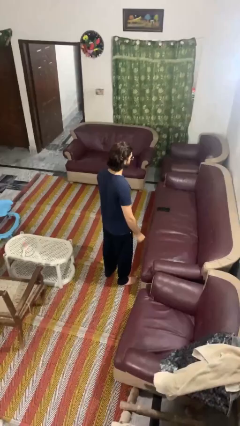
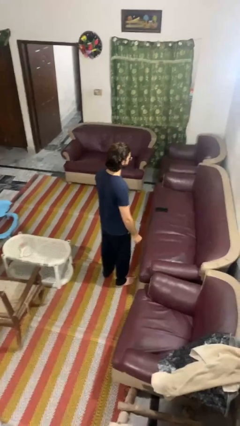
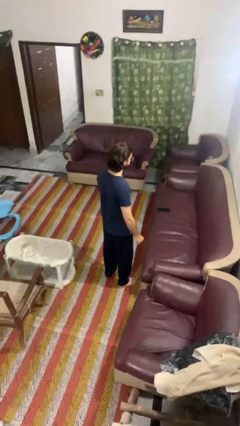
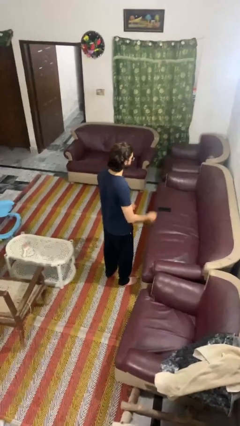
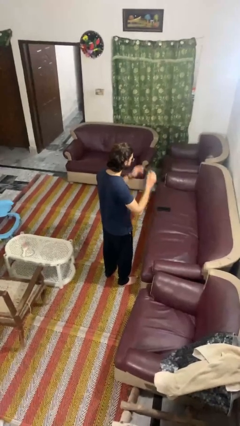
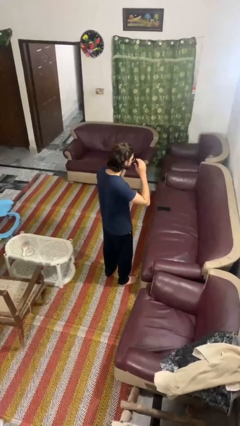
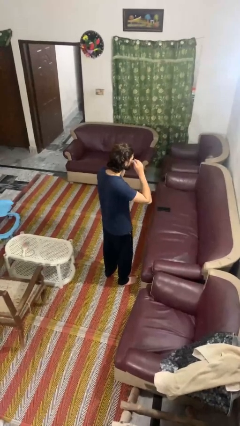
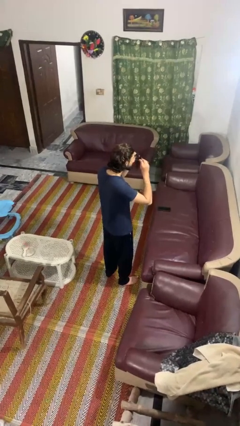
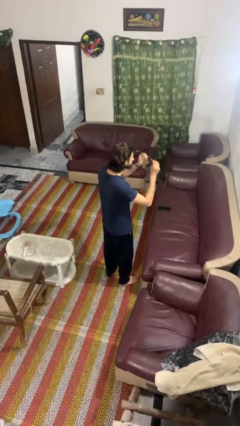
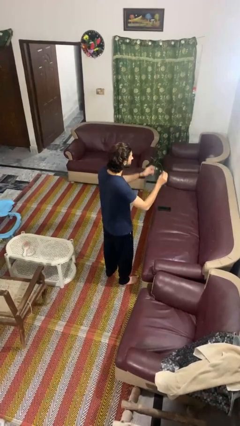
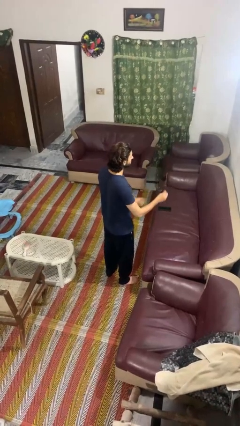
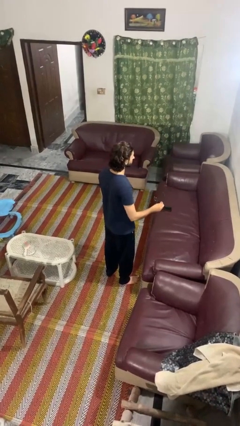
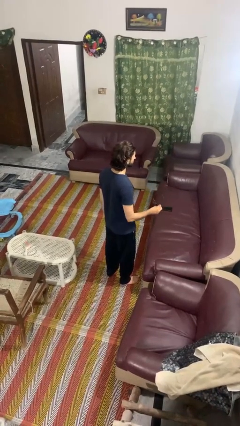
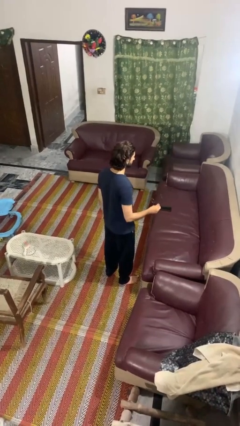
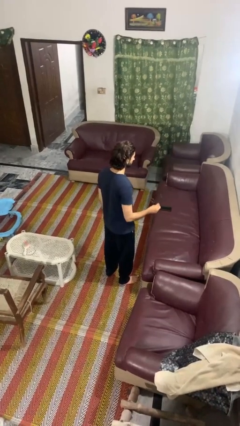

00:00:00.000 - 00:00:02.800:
person takes off sunglasses

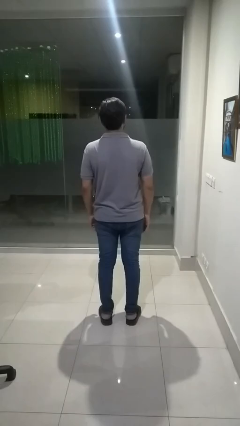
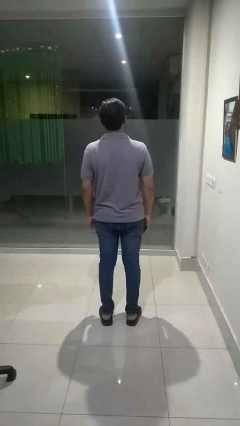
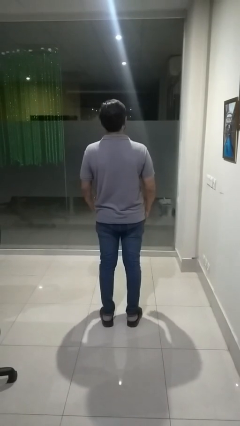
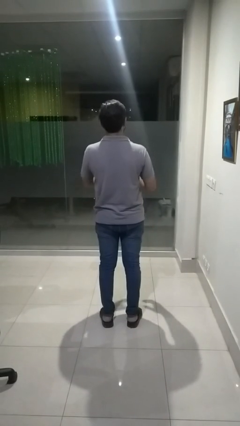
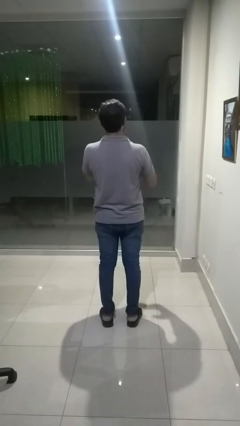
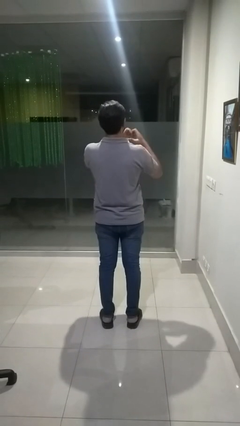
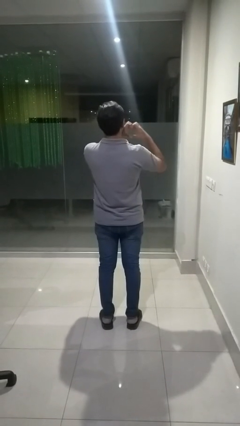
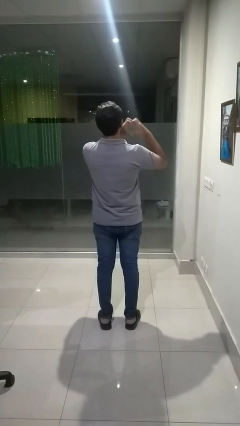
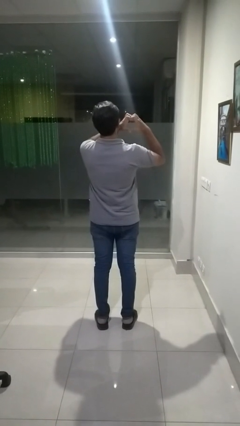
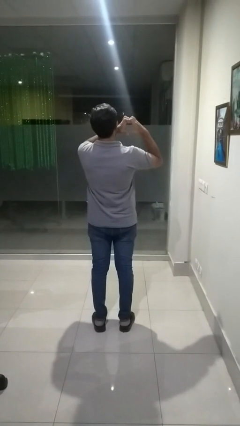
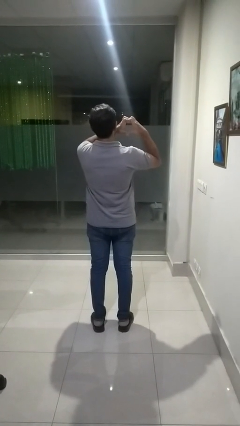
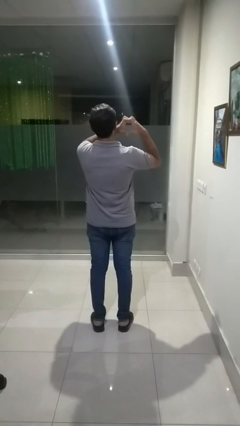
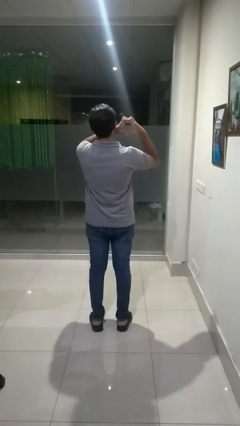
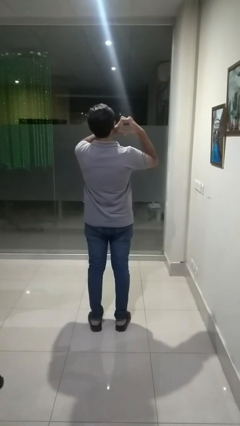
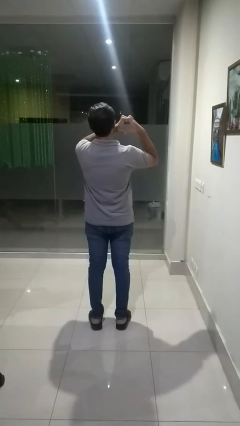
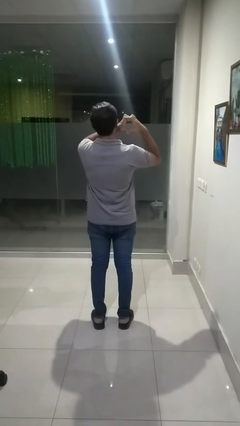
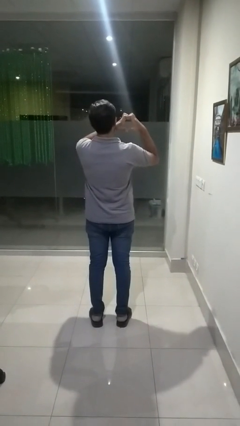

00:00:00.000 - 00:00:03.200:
person gestures heart

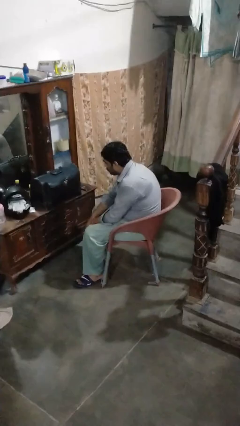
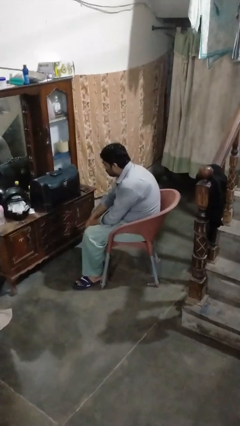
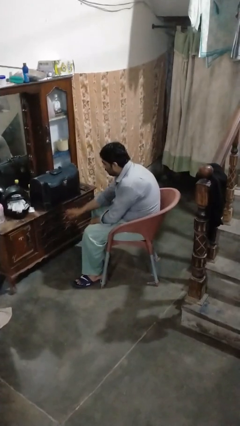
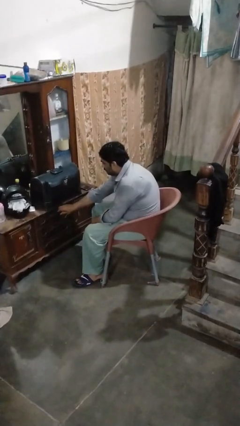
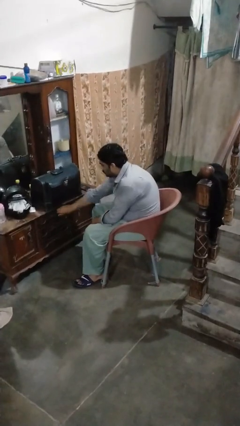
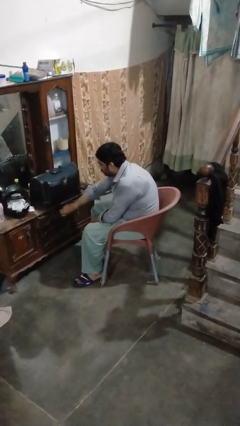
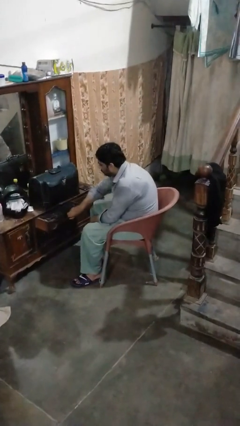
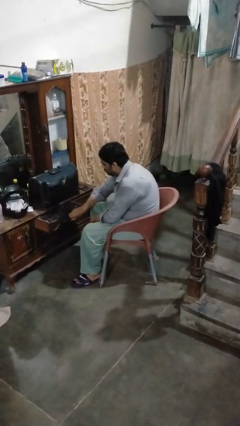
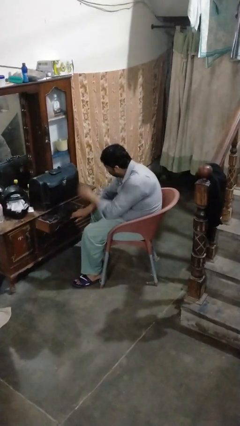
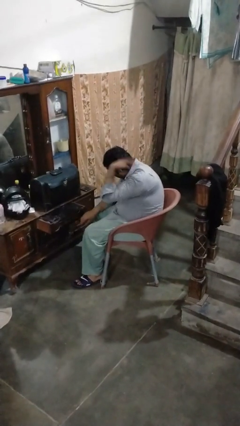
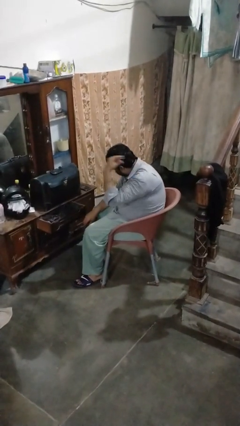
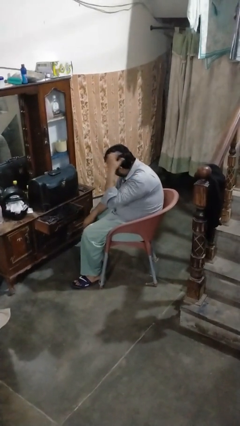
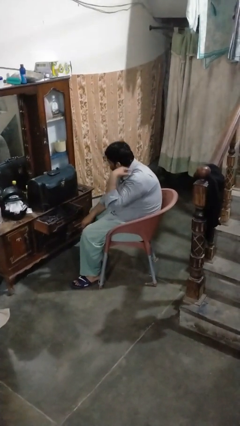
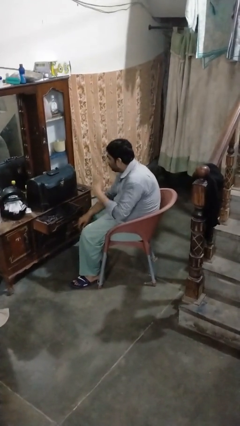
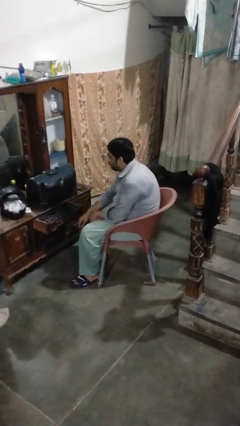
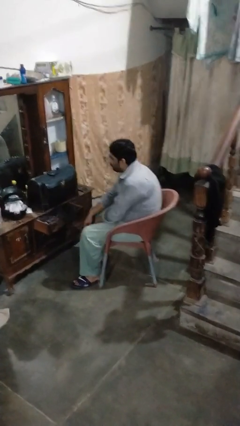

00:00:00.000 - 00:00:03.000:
person opens dresser drawer

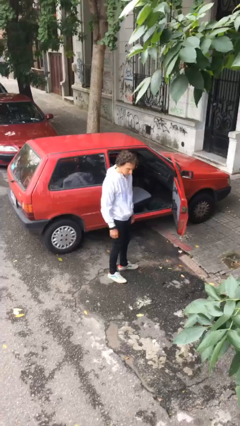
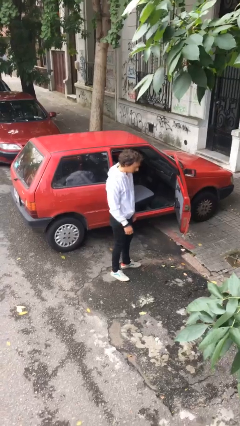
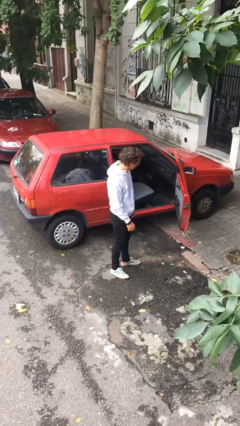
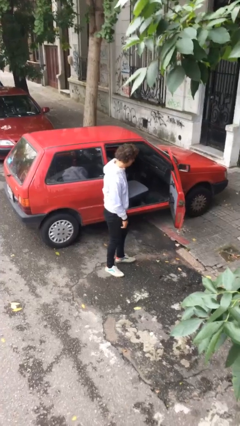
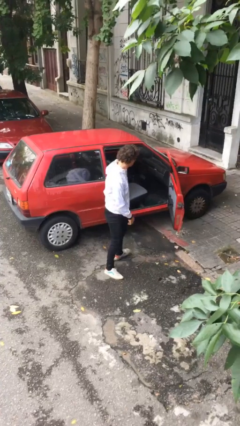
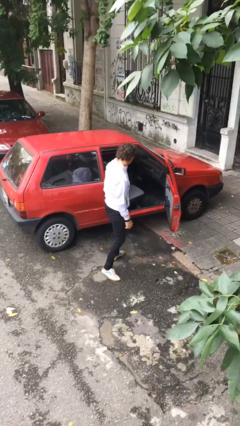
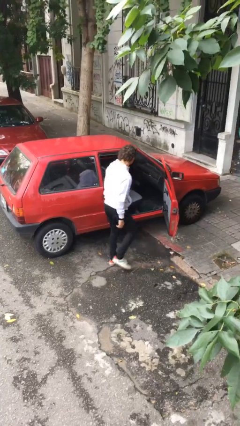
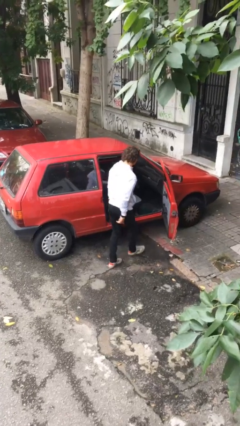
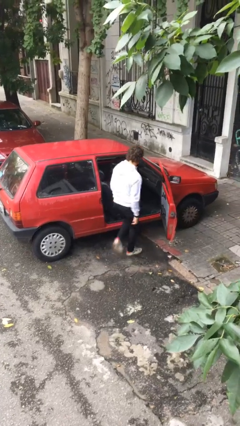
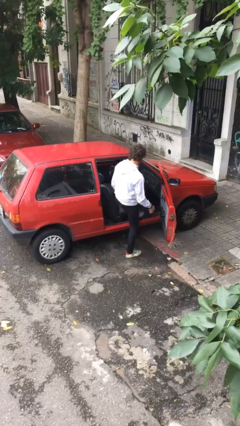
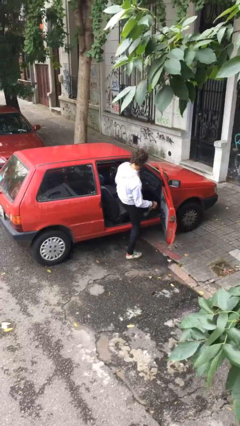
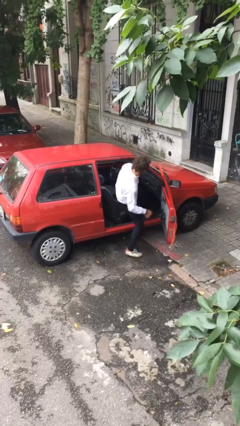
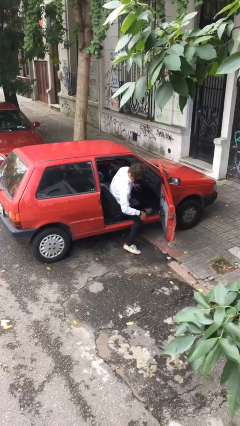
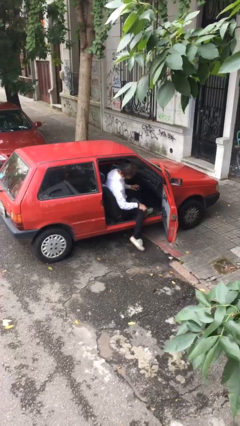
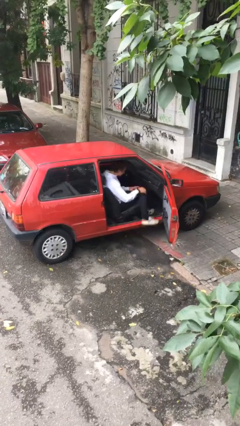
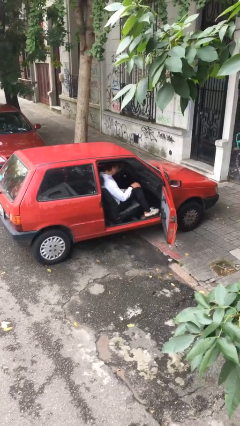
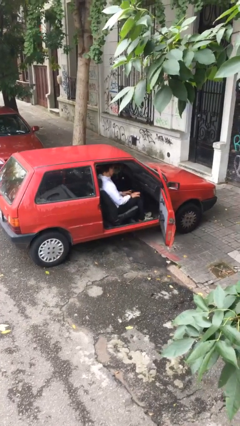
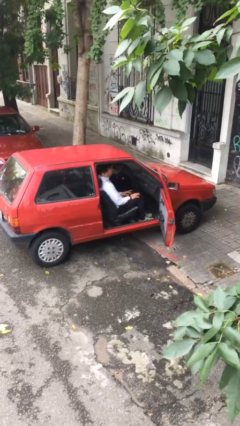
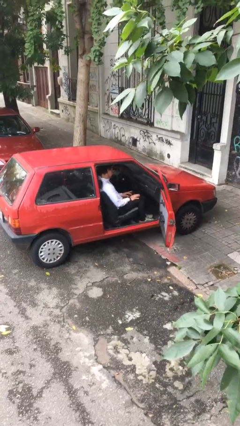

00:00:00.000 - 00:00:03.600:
person enters car

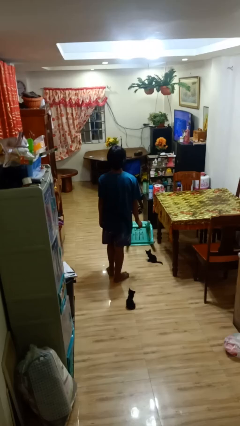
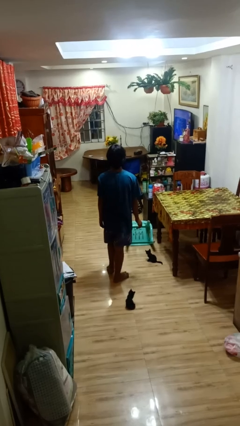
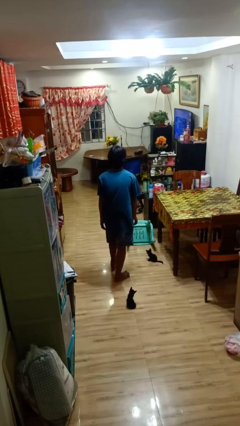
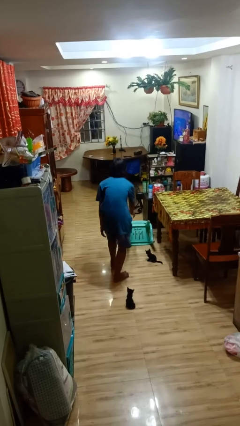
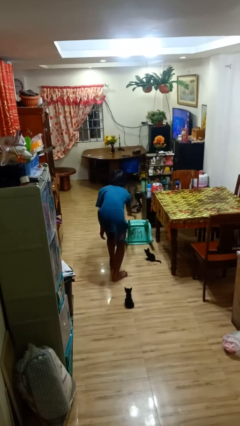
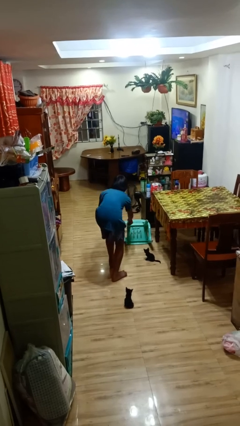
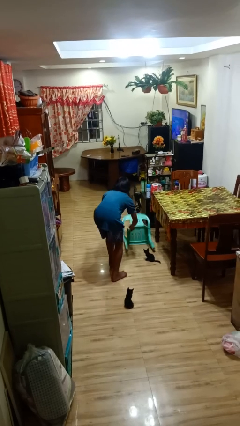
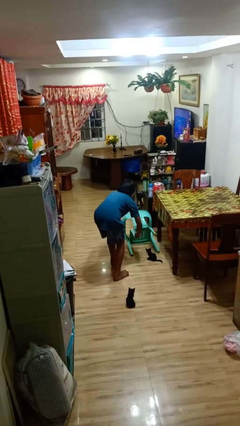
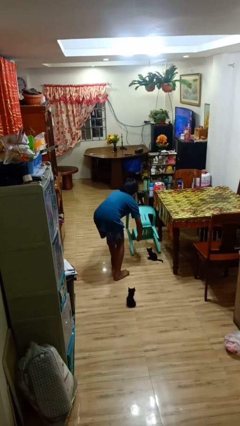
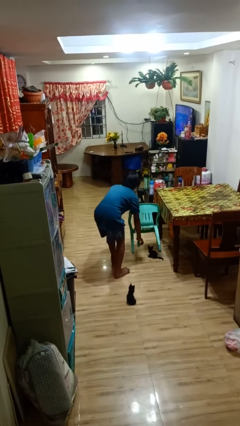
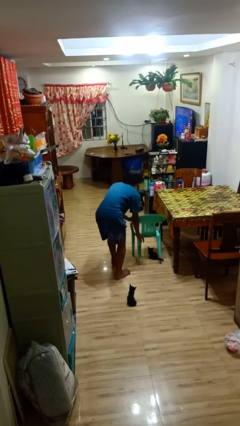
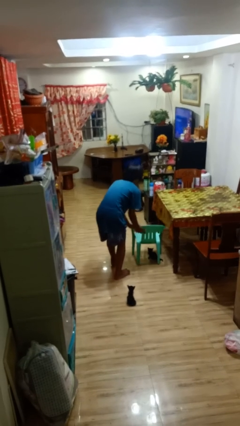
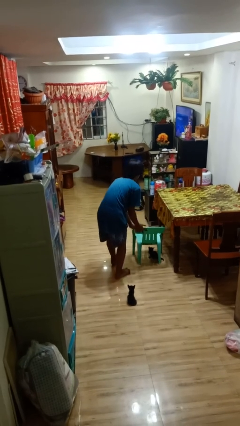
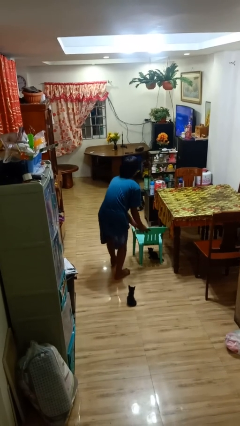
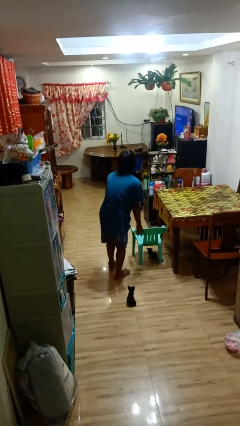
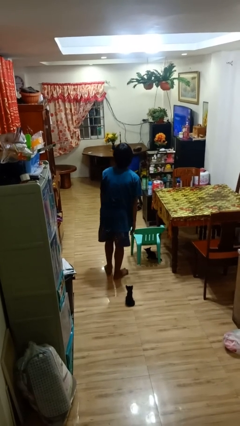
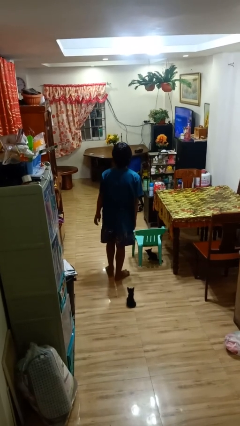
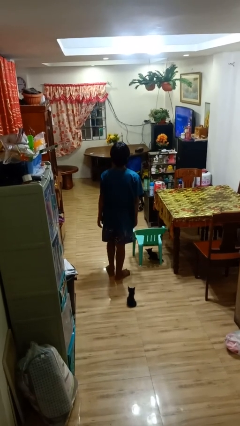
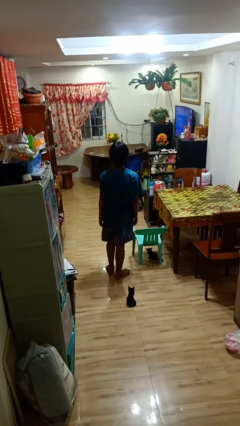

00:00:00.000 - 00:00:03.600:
person sets upright furniture

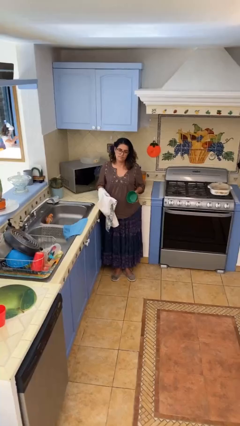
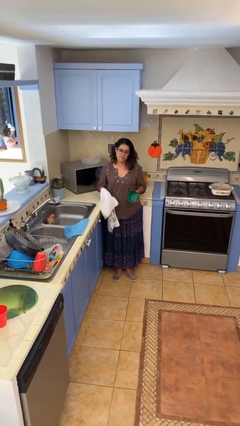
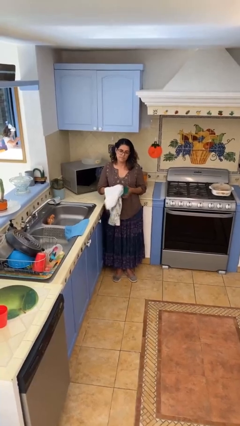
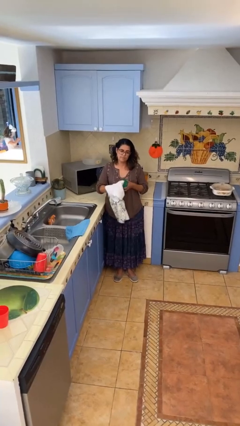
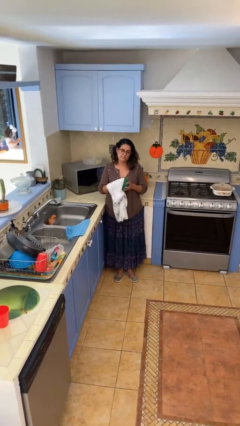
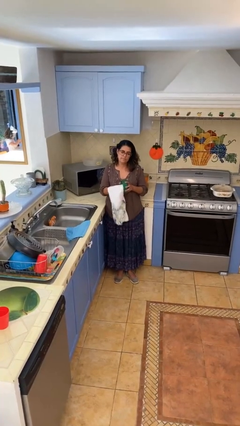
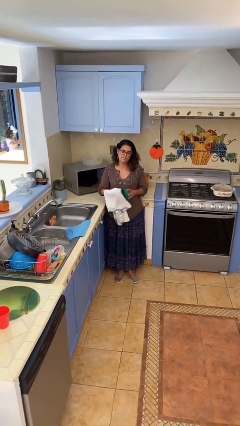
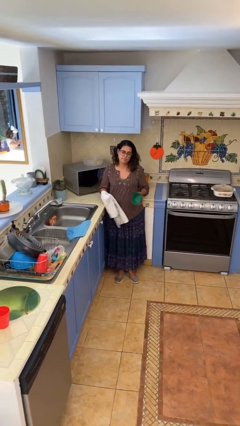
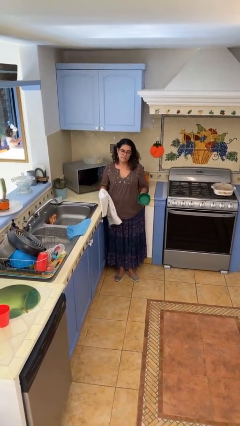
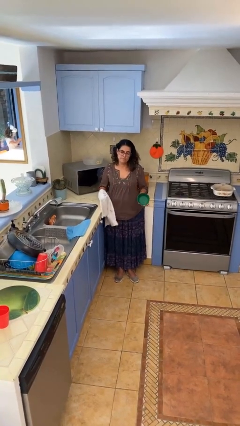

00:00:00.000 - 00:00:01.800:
person dries dish
